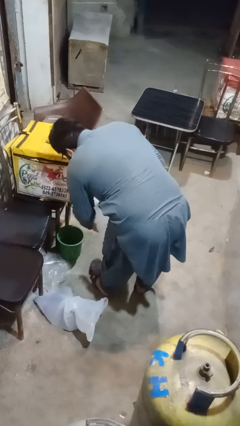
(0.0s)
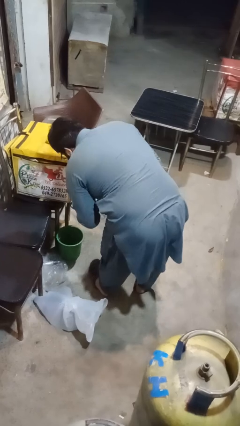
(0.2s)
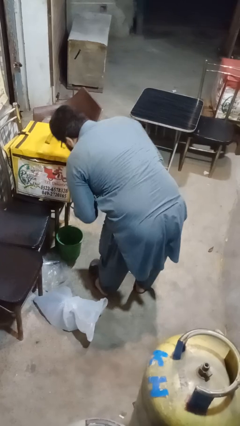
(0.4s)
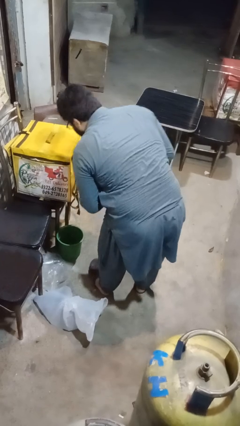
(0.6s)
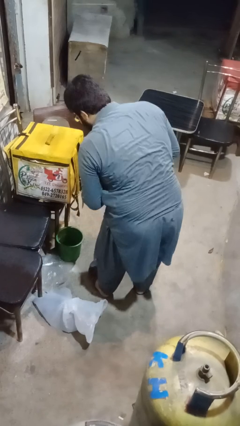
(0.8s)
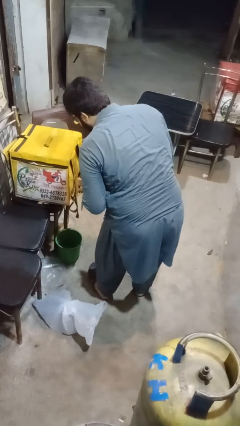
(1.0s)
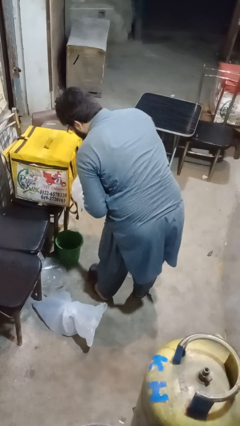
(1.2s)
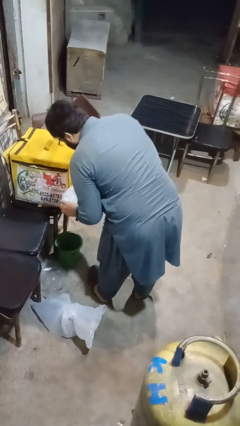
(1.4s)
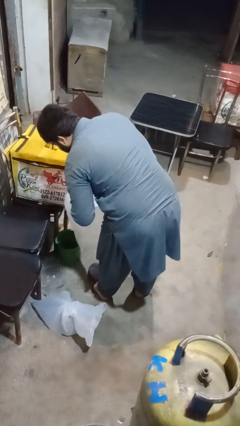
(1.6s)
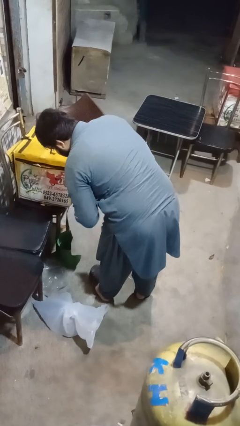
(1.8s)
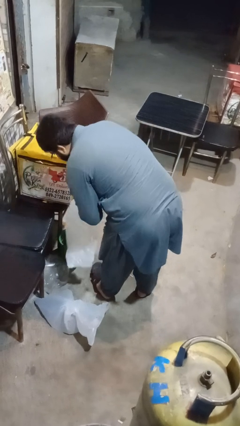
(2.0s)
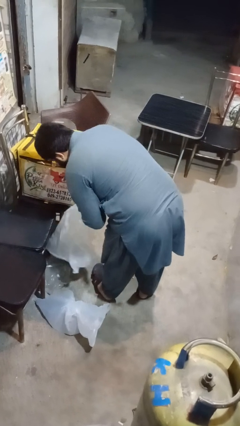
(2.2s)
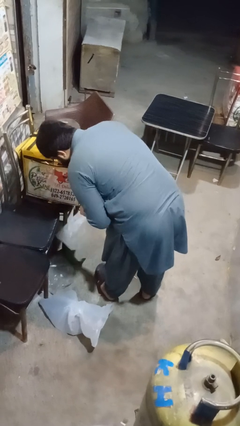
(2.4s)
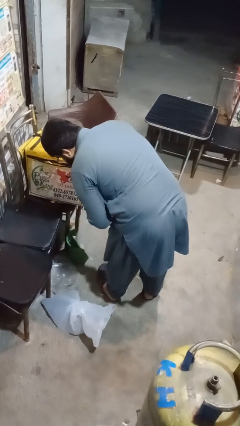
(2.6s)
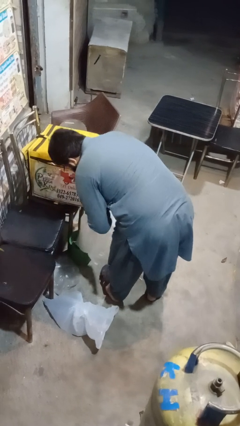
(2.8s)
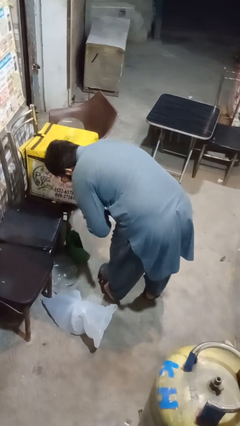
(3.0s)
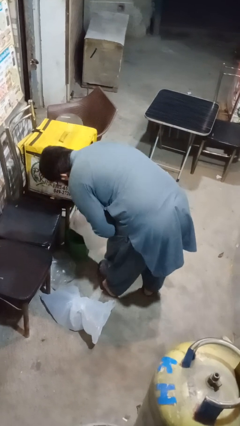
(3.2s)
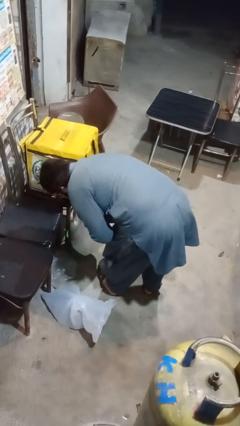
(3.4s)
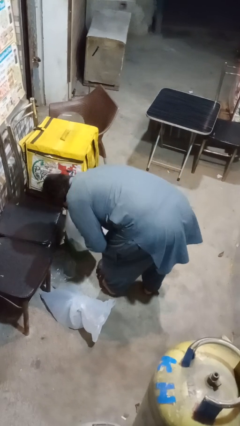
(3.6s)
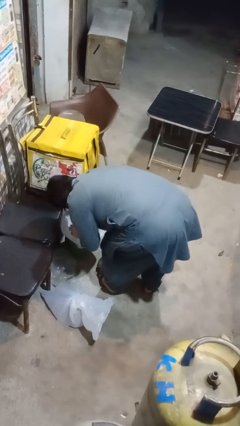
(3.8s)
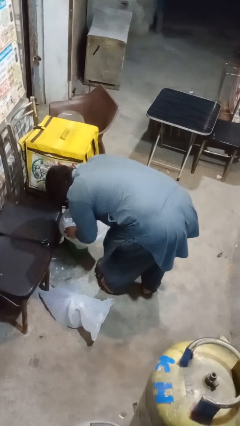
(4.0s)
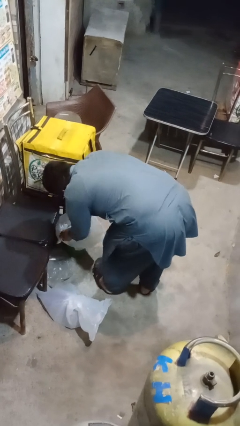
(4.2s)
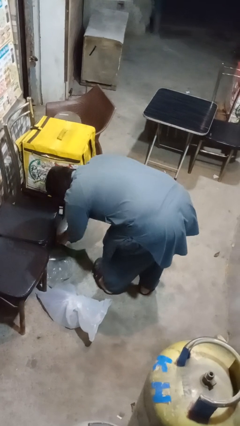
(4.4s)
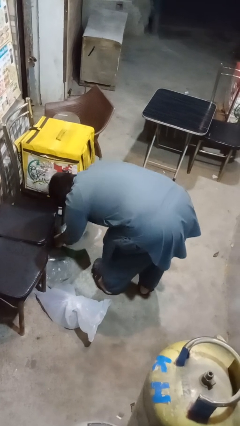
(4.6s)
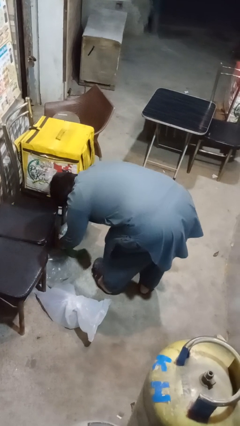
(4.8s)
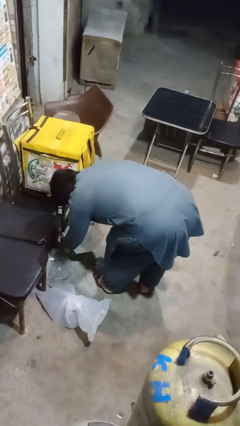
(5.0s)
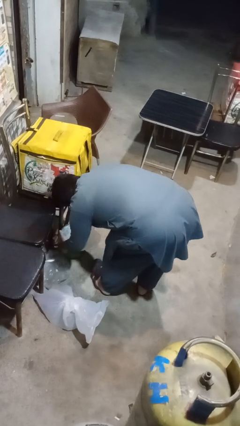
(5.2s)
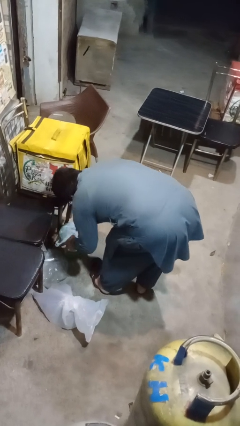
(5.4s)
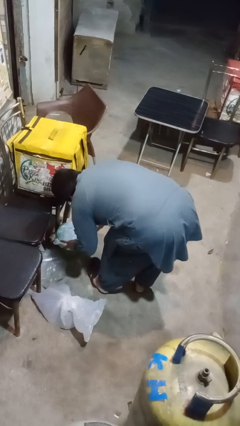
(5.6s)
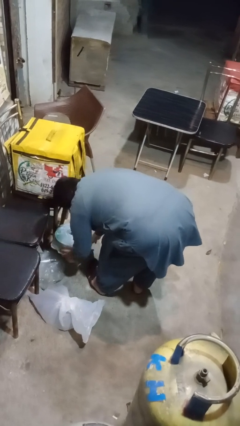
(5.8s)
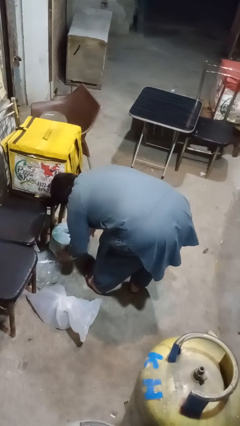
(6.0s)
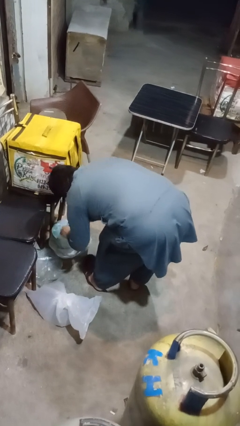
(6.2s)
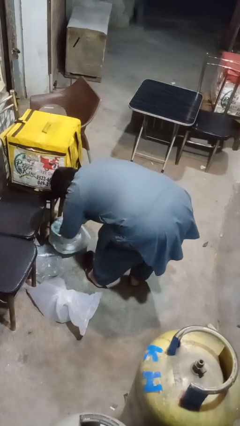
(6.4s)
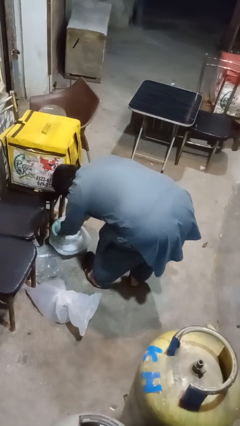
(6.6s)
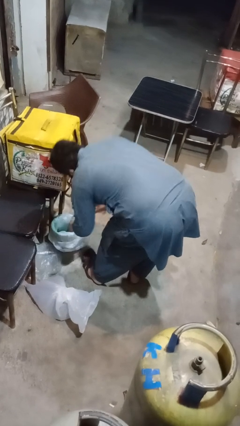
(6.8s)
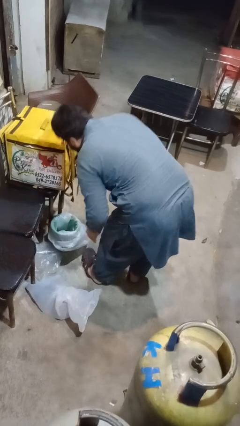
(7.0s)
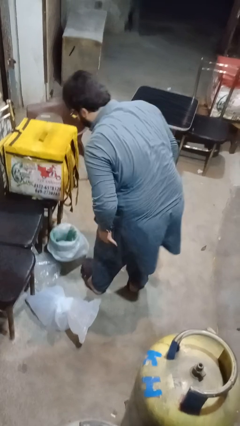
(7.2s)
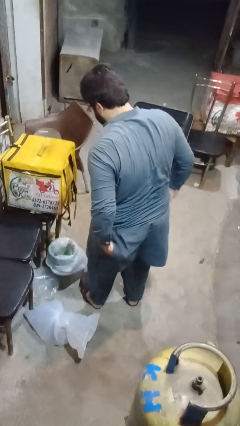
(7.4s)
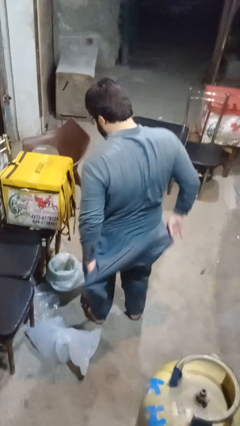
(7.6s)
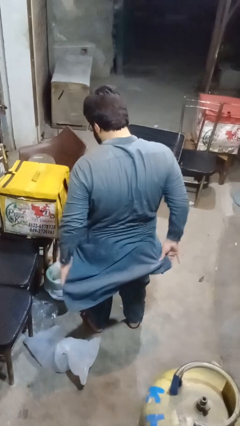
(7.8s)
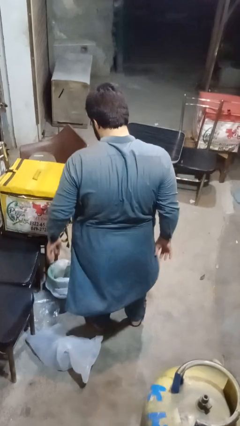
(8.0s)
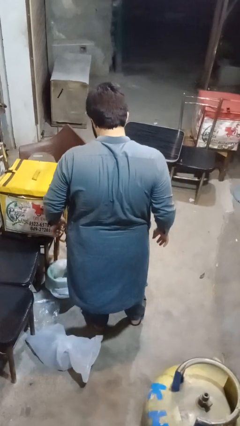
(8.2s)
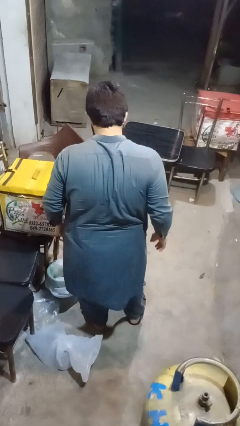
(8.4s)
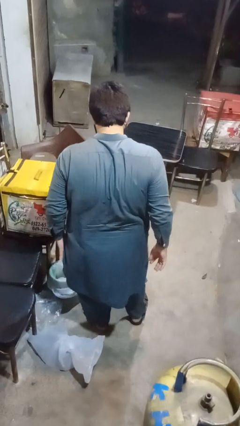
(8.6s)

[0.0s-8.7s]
person inserts trashbag into trashcan

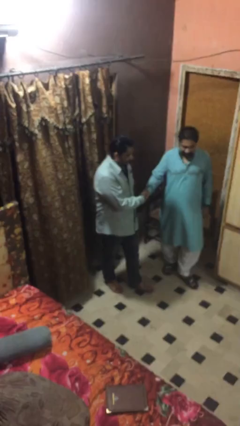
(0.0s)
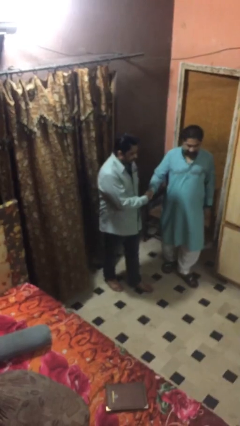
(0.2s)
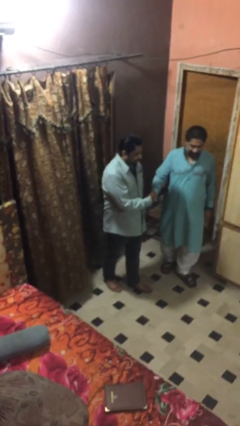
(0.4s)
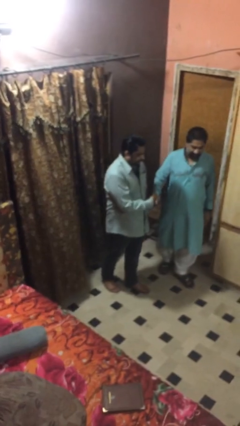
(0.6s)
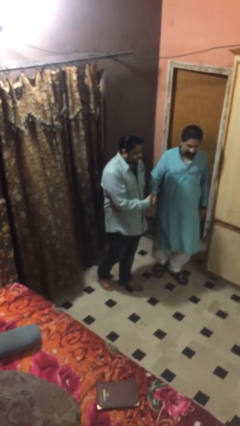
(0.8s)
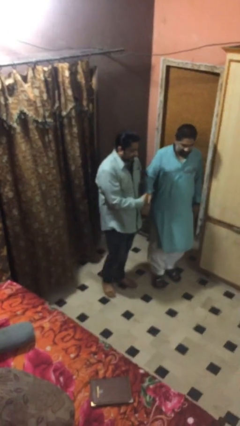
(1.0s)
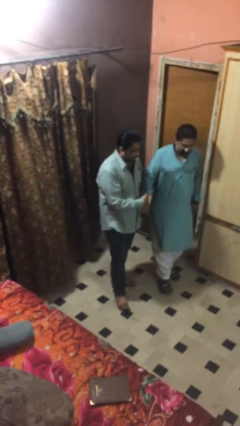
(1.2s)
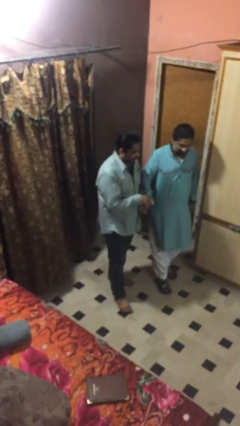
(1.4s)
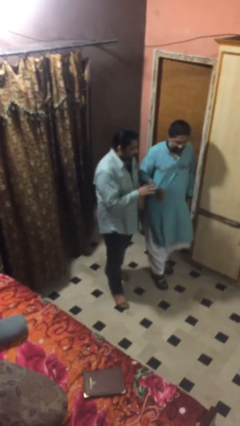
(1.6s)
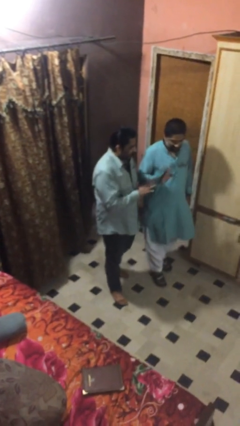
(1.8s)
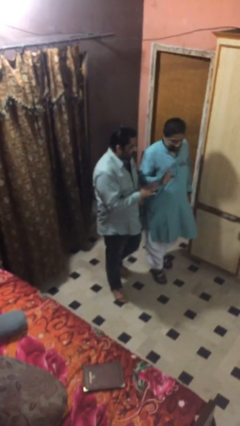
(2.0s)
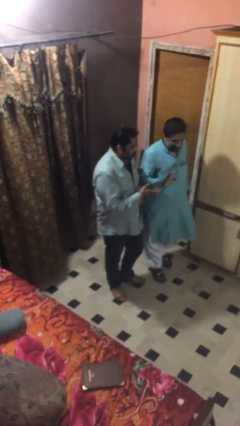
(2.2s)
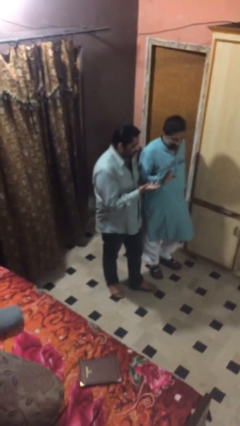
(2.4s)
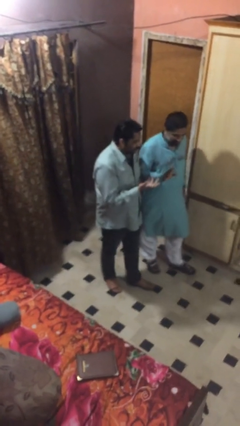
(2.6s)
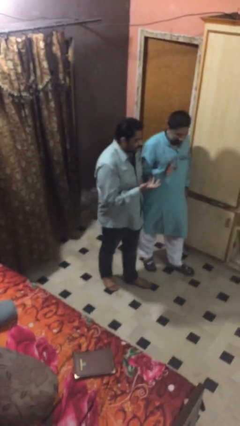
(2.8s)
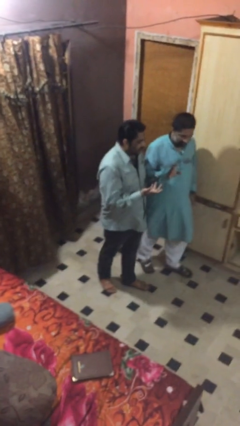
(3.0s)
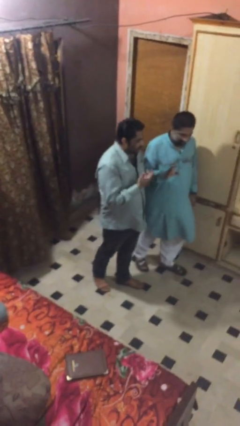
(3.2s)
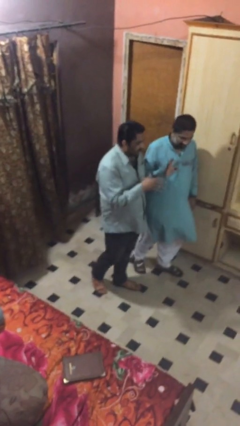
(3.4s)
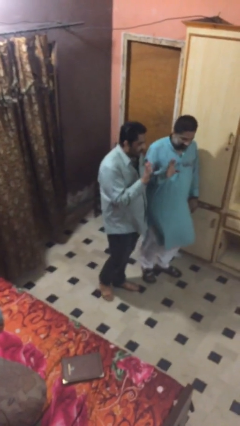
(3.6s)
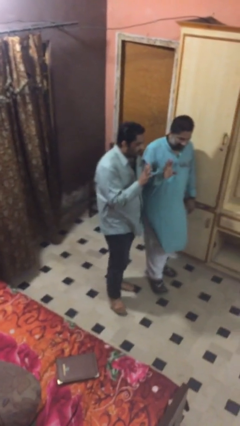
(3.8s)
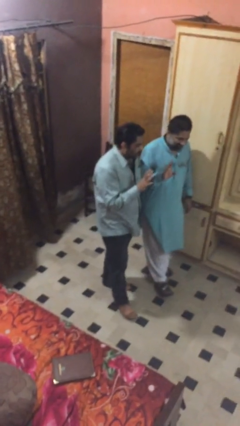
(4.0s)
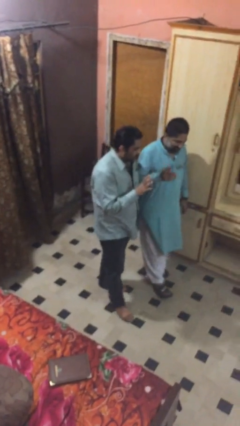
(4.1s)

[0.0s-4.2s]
person talks to person

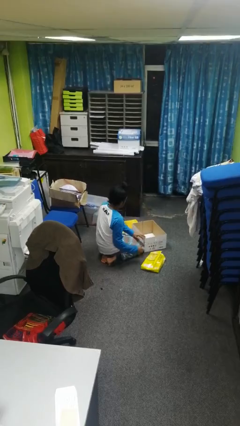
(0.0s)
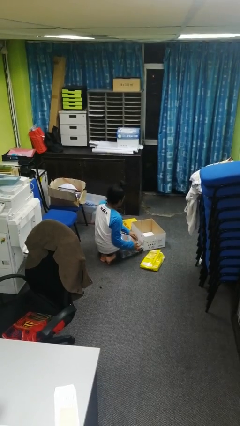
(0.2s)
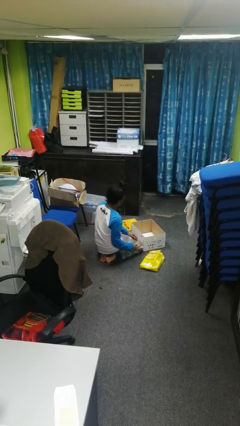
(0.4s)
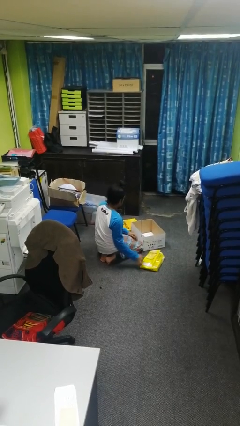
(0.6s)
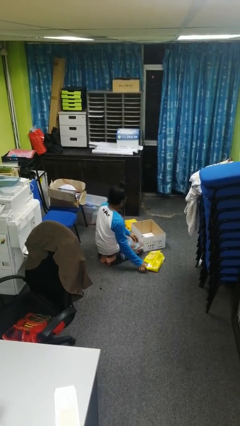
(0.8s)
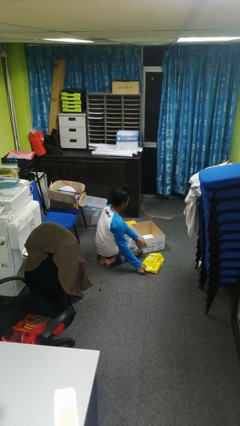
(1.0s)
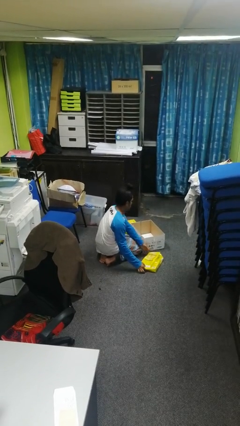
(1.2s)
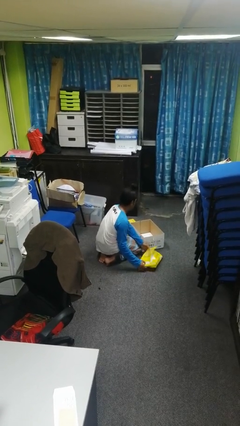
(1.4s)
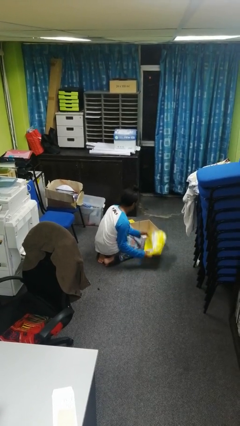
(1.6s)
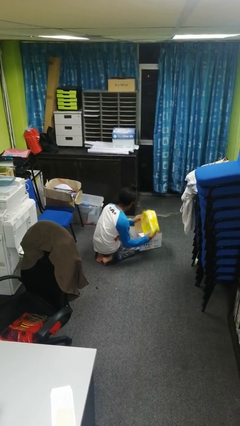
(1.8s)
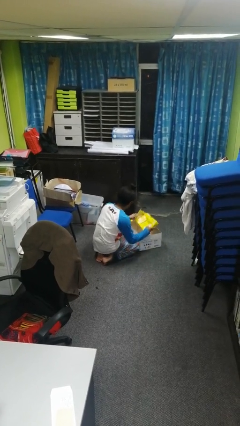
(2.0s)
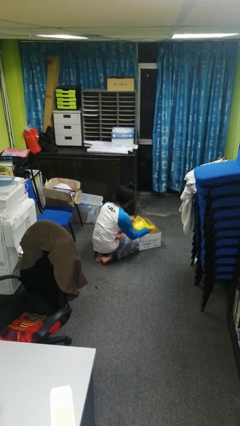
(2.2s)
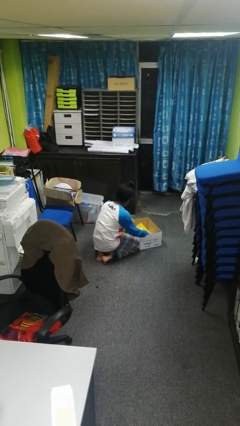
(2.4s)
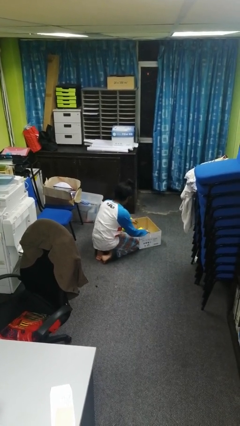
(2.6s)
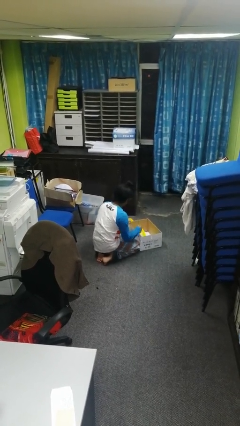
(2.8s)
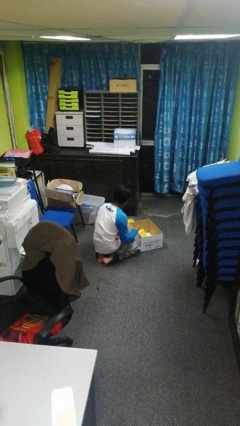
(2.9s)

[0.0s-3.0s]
person puts object into box

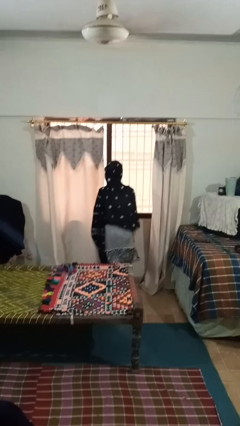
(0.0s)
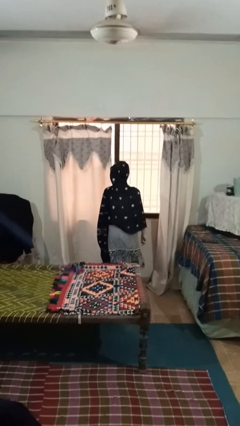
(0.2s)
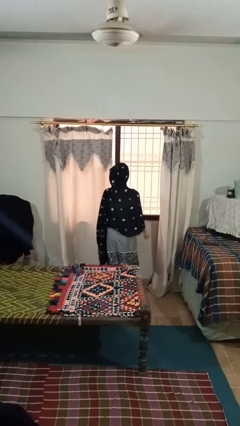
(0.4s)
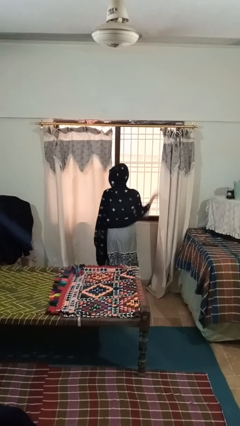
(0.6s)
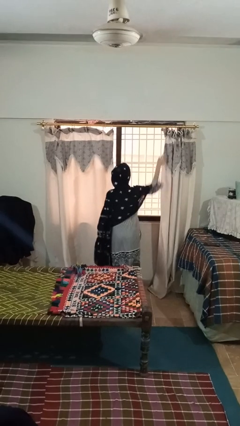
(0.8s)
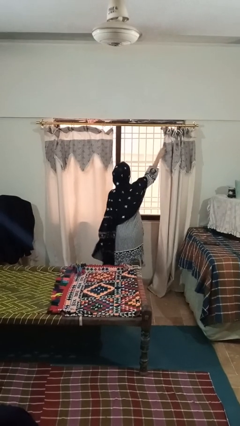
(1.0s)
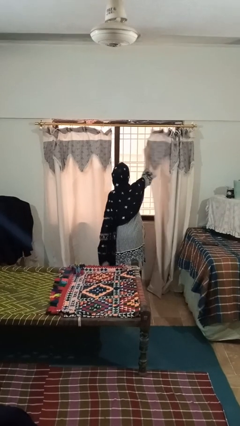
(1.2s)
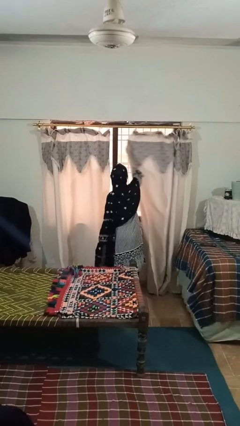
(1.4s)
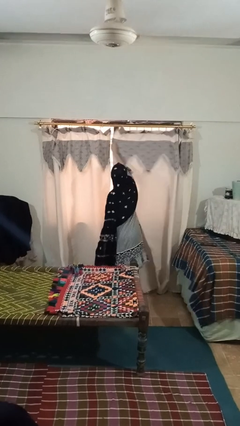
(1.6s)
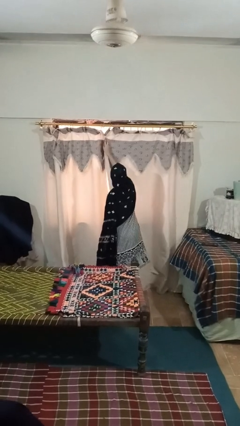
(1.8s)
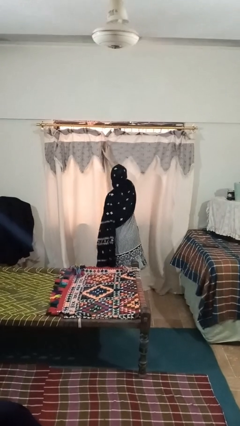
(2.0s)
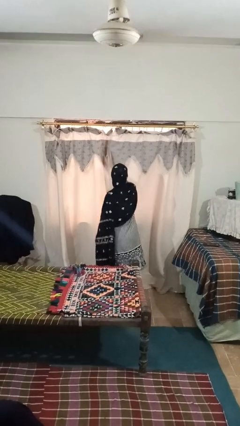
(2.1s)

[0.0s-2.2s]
person closes curtains
